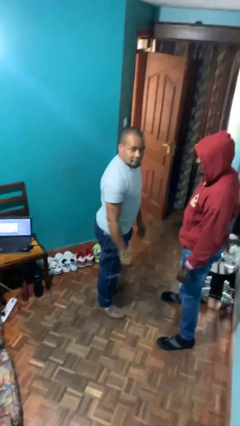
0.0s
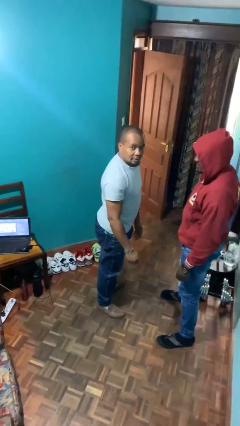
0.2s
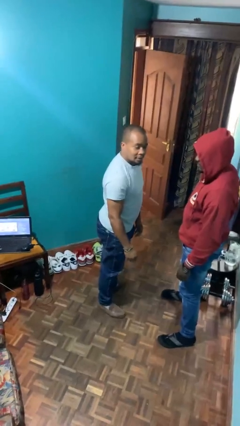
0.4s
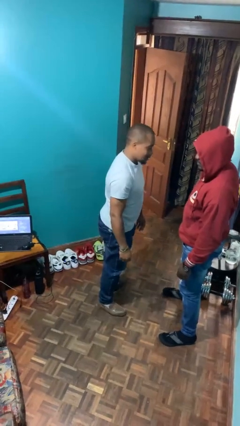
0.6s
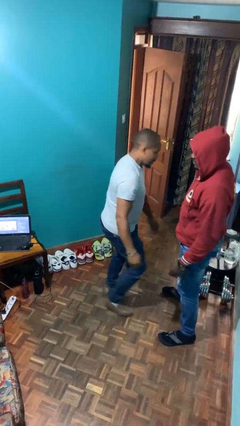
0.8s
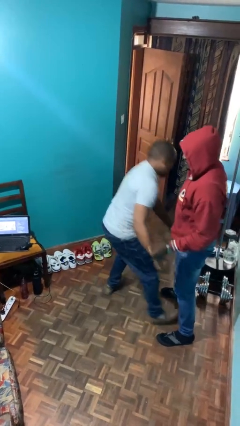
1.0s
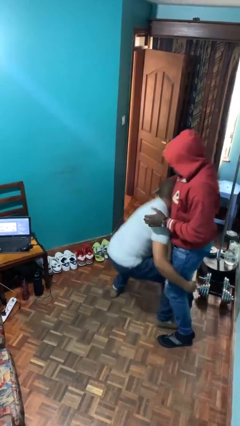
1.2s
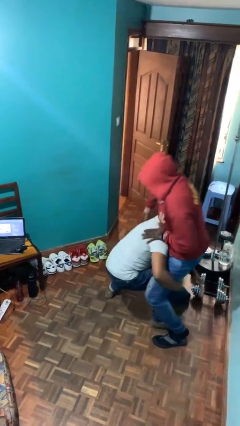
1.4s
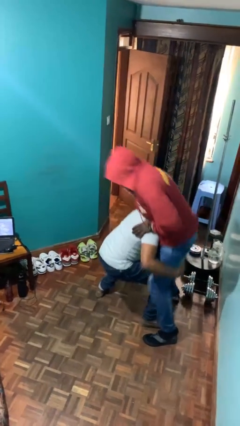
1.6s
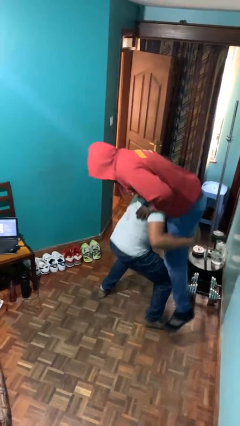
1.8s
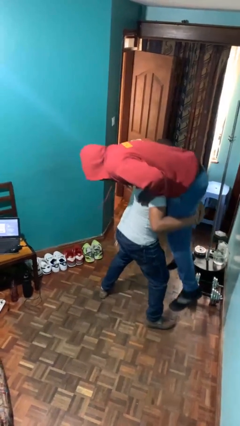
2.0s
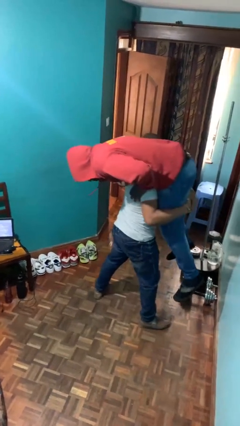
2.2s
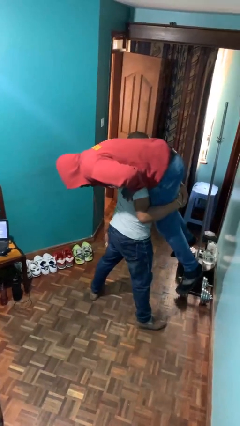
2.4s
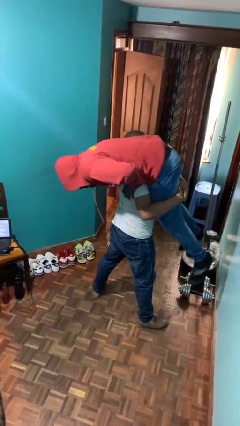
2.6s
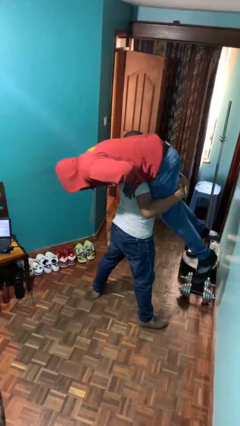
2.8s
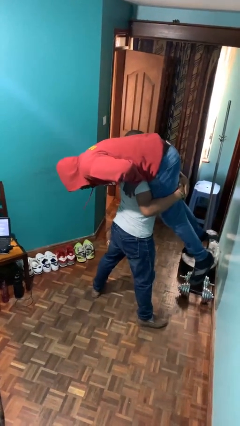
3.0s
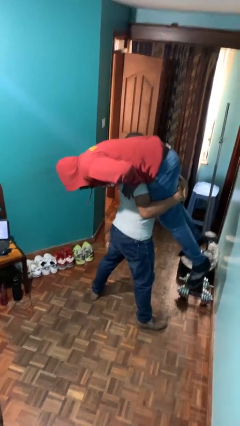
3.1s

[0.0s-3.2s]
person carries person over shoulder

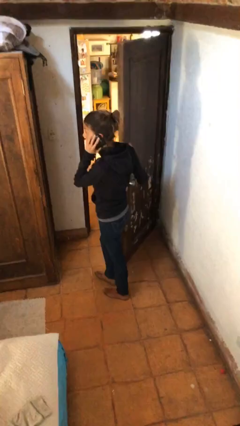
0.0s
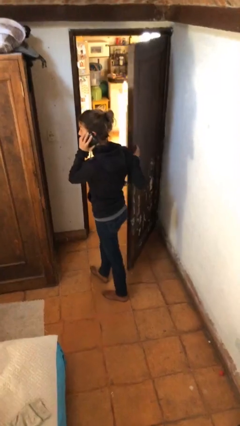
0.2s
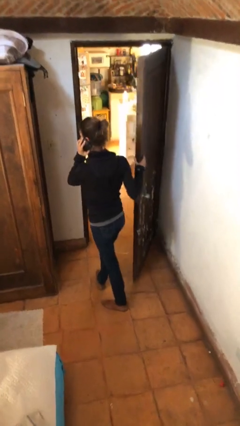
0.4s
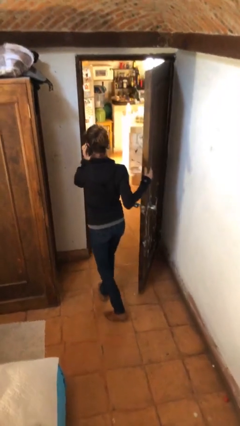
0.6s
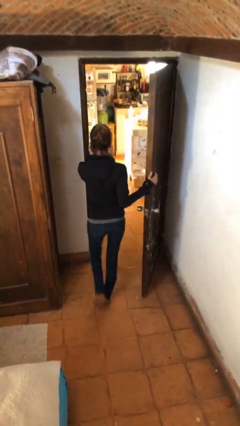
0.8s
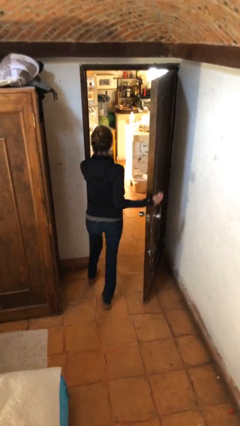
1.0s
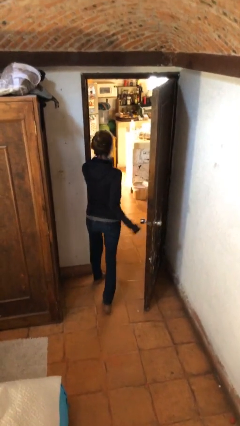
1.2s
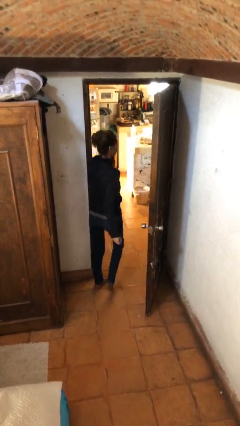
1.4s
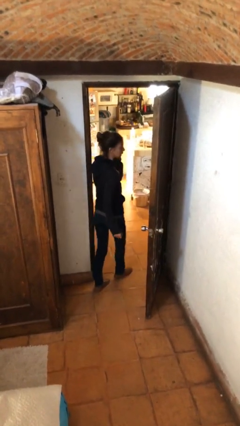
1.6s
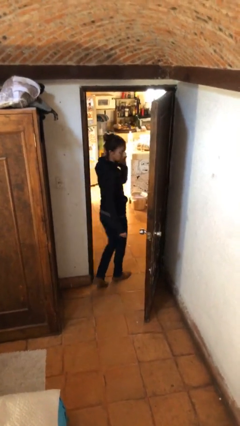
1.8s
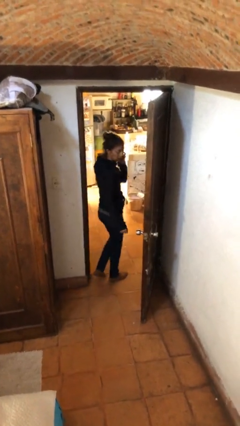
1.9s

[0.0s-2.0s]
person exits scene through structure

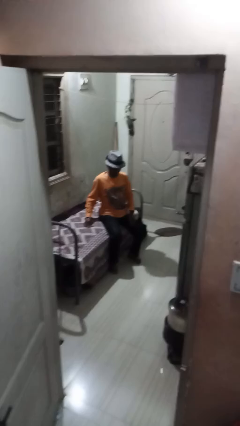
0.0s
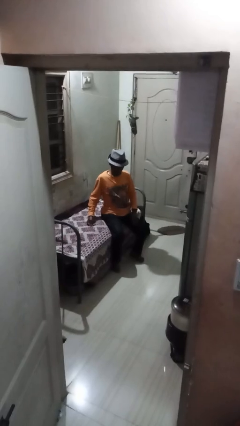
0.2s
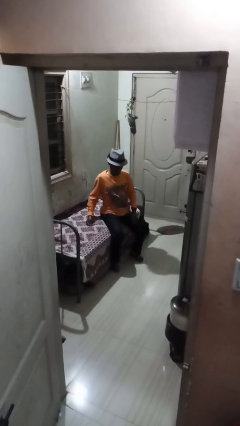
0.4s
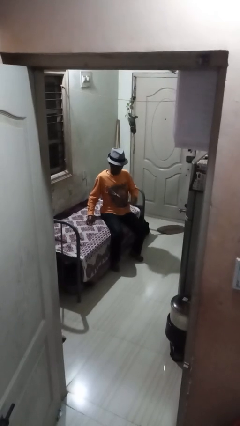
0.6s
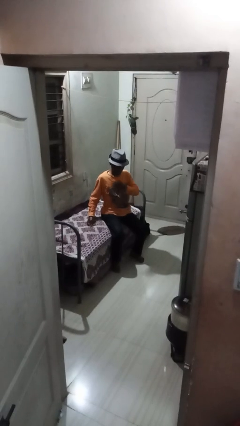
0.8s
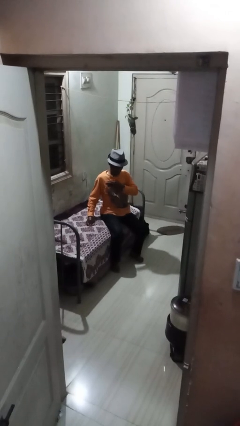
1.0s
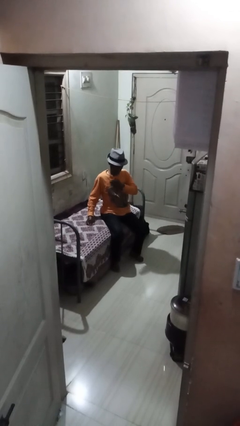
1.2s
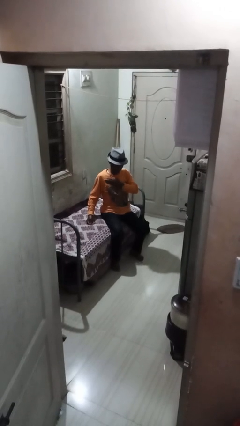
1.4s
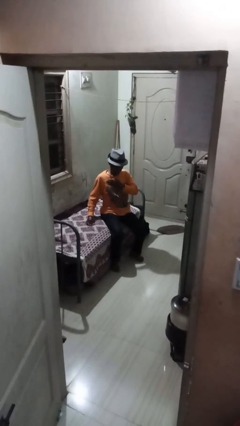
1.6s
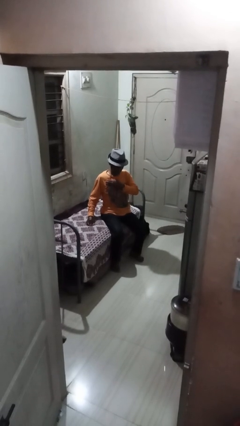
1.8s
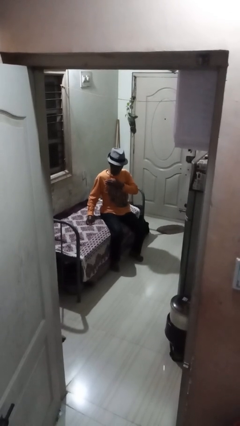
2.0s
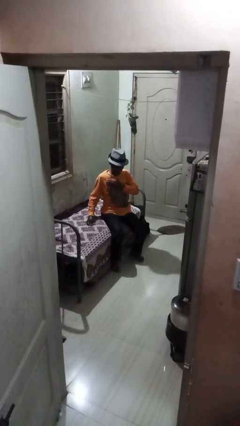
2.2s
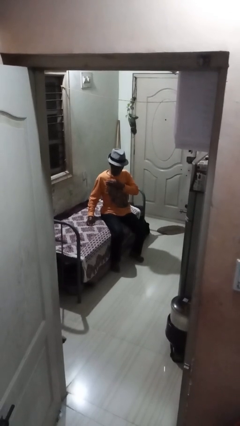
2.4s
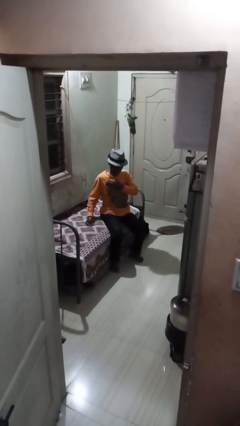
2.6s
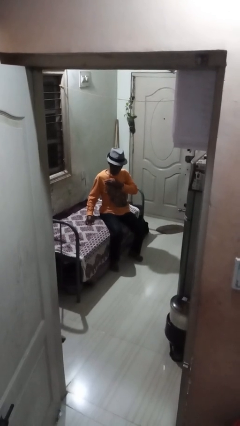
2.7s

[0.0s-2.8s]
person drums on chest

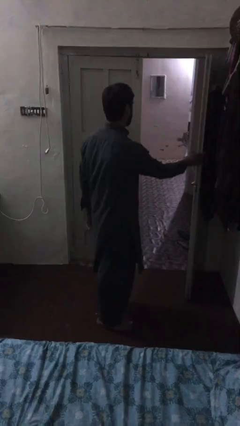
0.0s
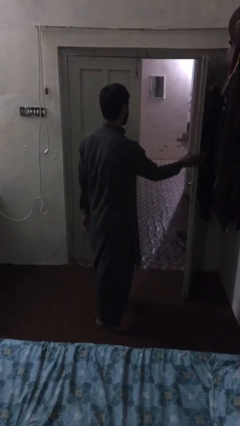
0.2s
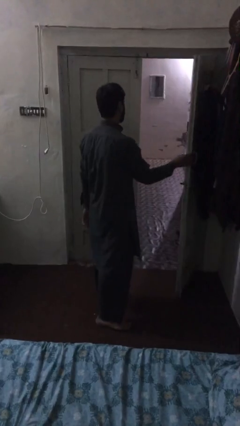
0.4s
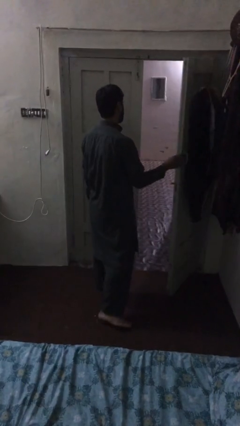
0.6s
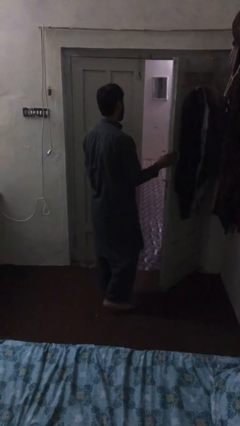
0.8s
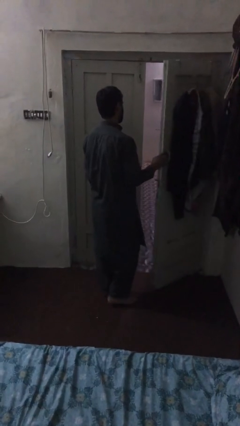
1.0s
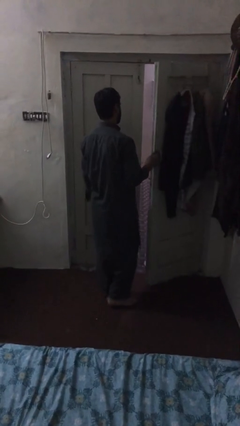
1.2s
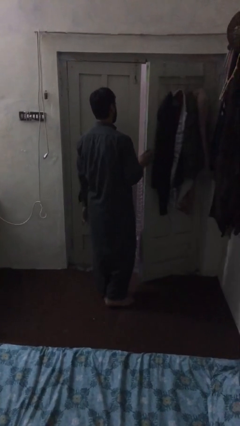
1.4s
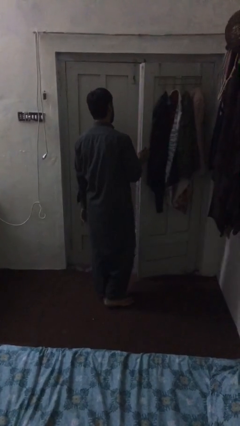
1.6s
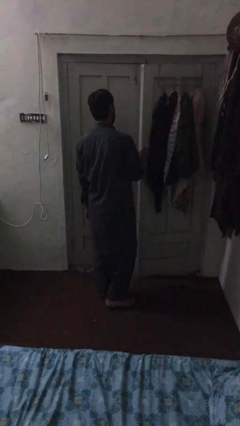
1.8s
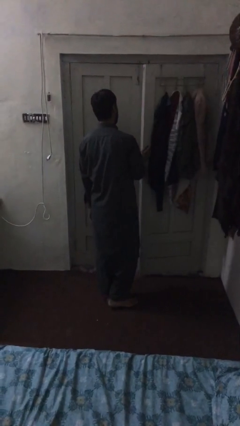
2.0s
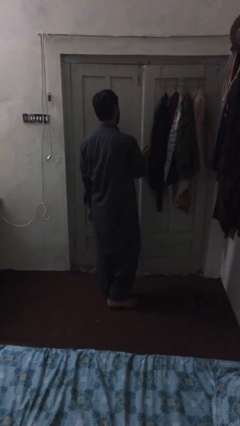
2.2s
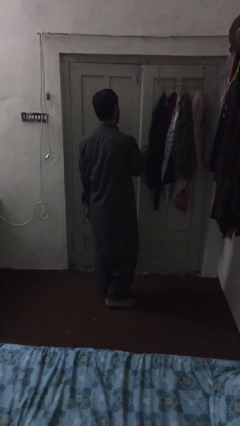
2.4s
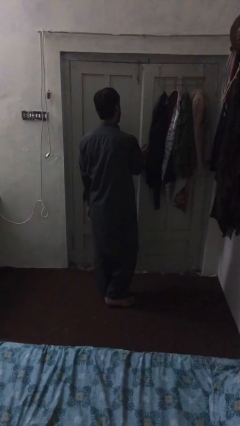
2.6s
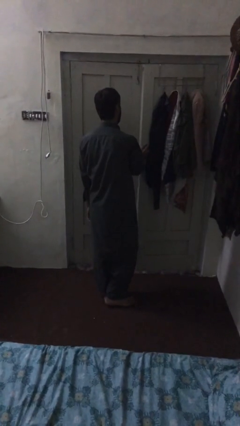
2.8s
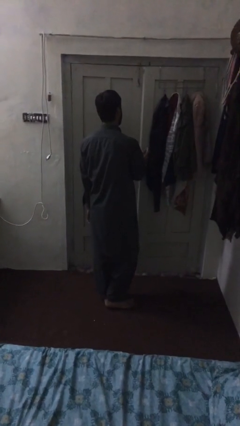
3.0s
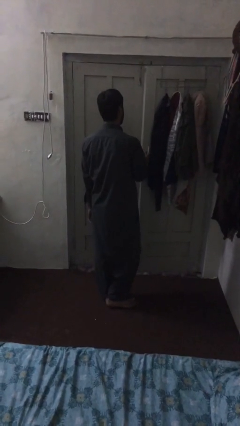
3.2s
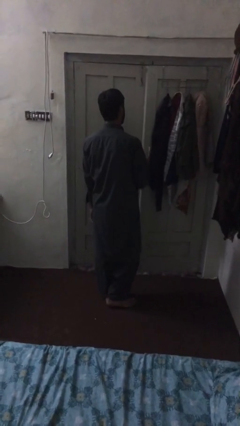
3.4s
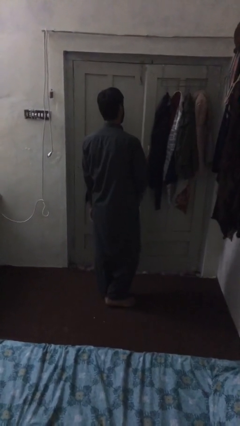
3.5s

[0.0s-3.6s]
person closes facility door

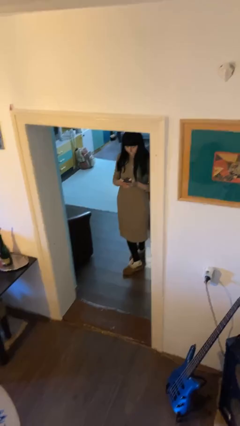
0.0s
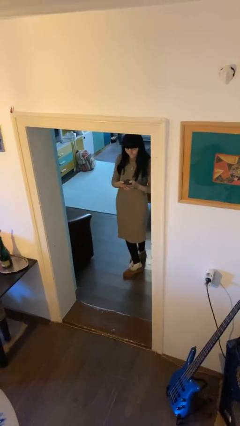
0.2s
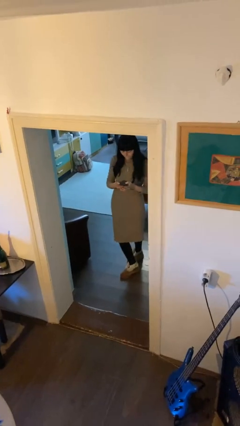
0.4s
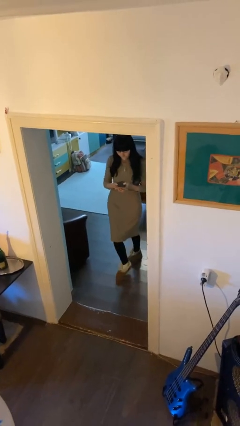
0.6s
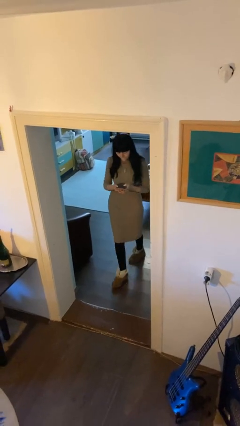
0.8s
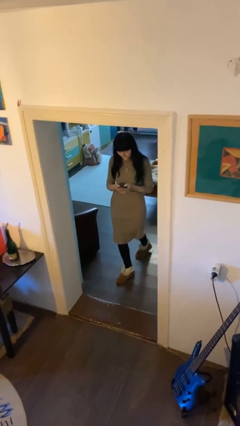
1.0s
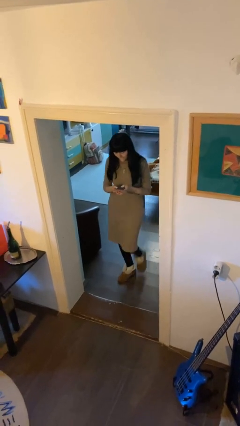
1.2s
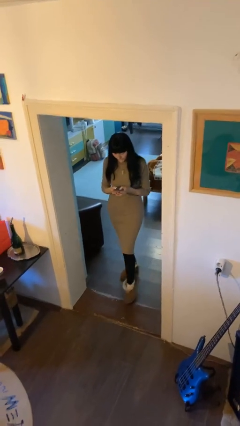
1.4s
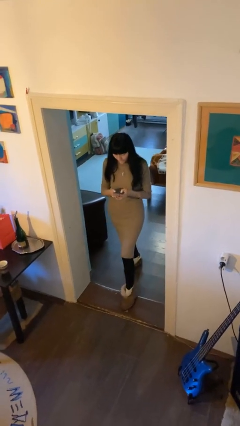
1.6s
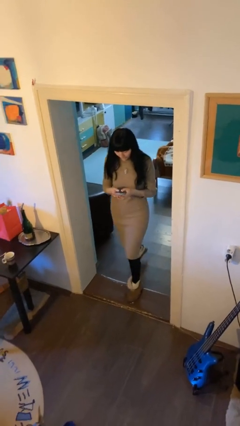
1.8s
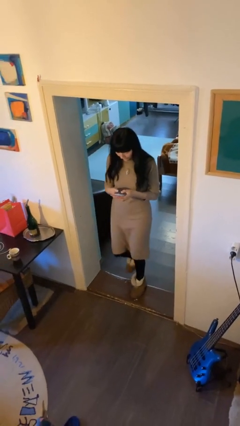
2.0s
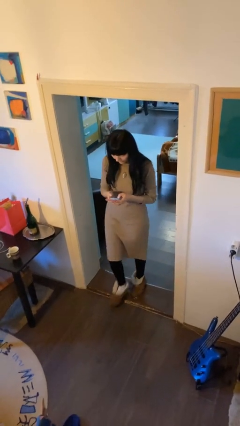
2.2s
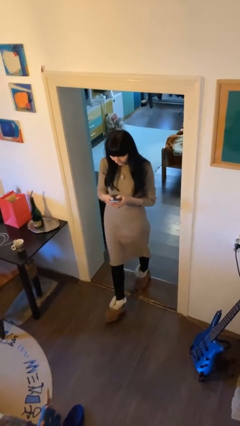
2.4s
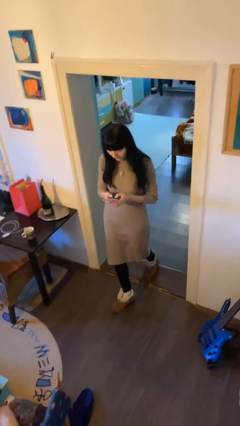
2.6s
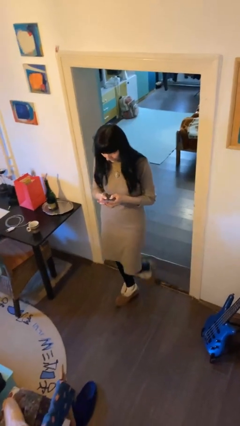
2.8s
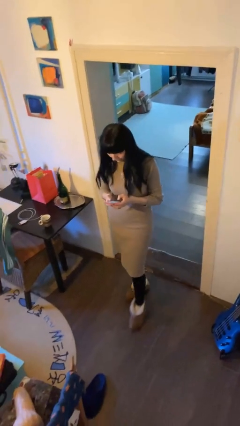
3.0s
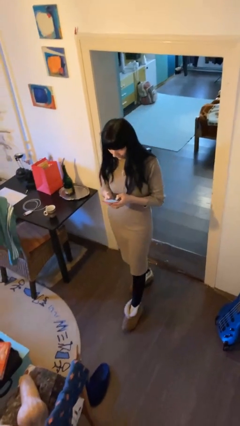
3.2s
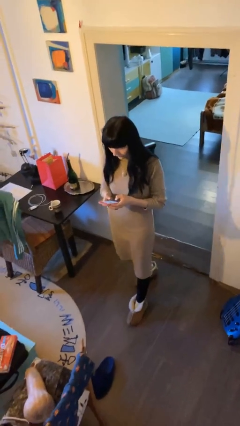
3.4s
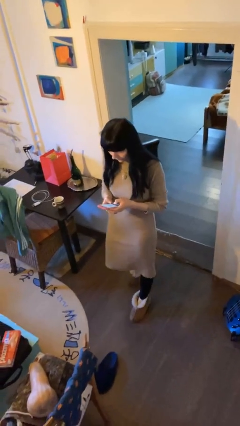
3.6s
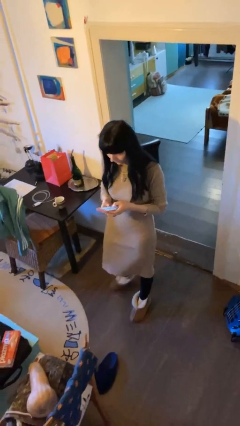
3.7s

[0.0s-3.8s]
person enters scene through structure

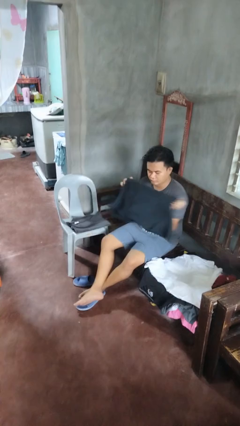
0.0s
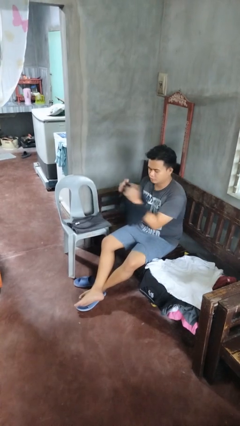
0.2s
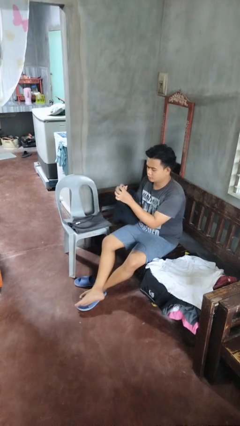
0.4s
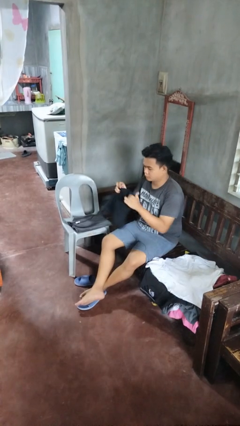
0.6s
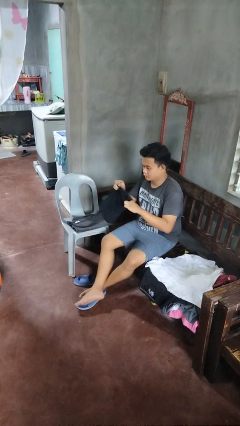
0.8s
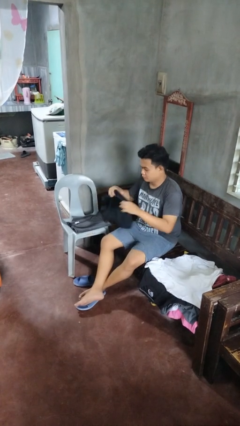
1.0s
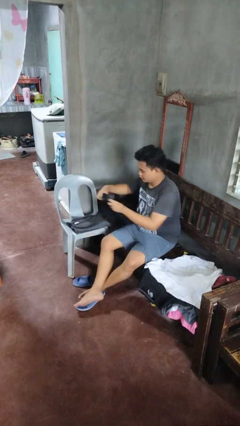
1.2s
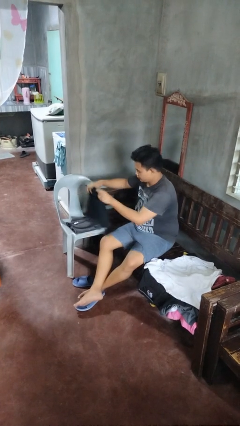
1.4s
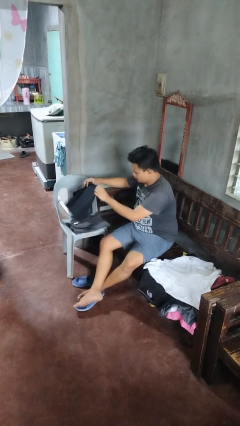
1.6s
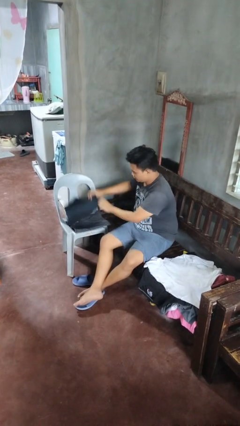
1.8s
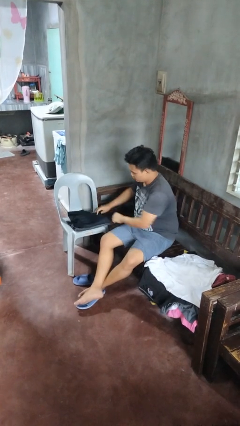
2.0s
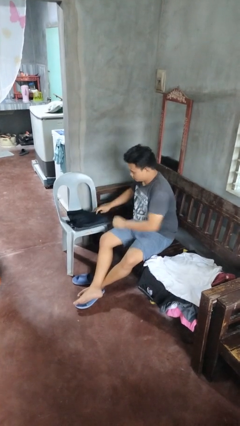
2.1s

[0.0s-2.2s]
person folds shirt
